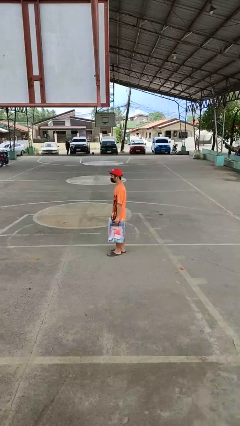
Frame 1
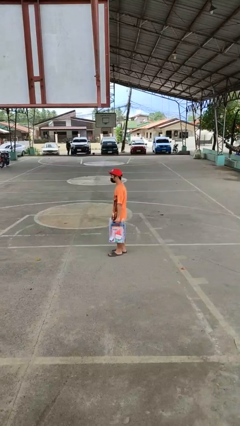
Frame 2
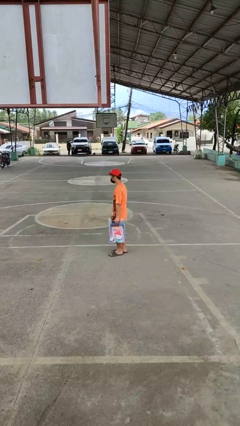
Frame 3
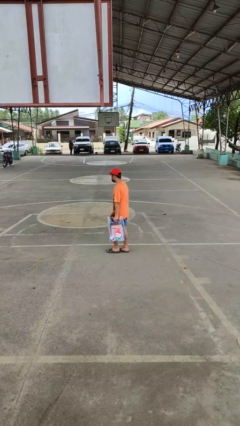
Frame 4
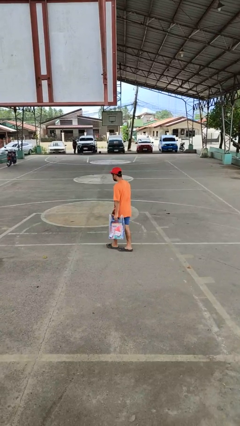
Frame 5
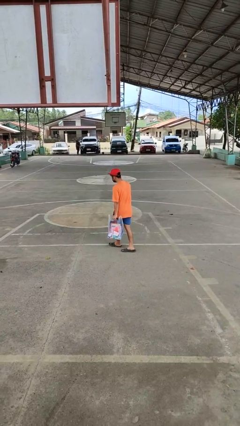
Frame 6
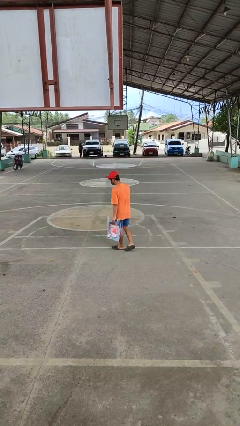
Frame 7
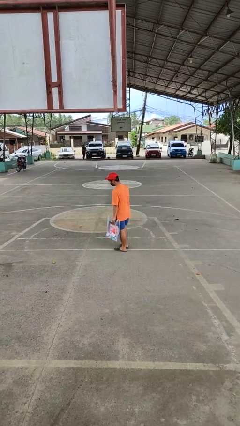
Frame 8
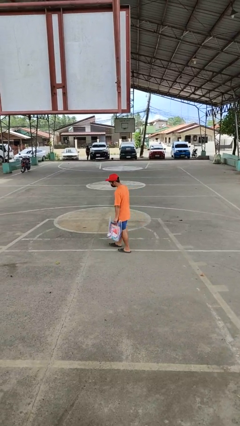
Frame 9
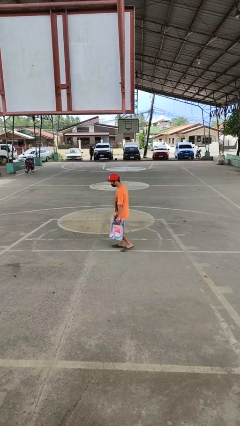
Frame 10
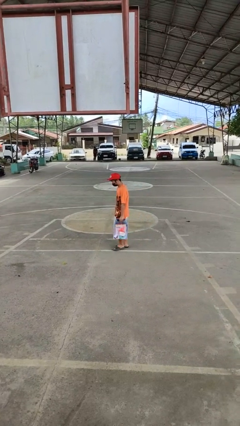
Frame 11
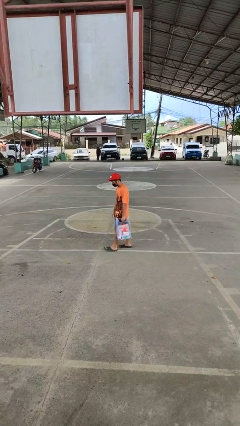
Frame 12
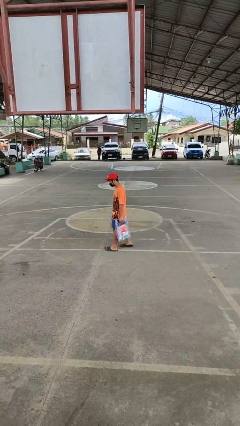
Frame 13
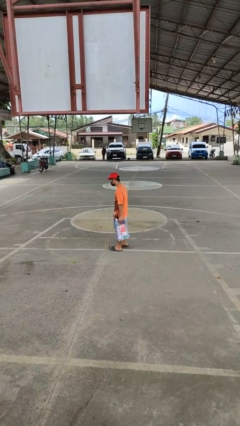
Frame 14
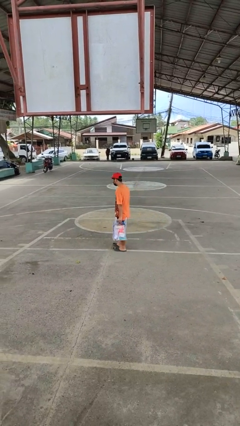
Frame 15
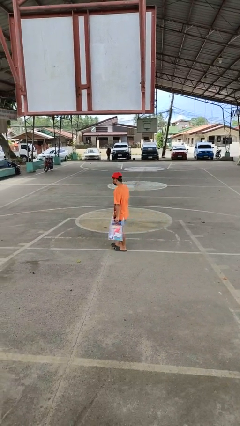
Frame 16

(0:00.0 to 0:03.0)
person carries groceries

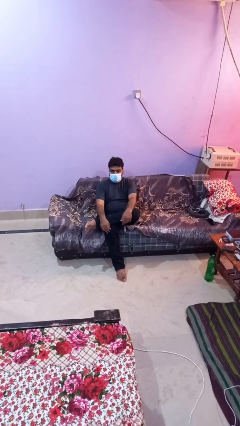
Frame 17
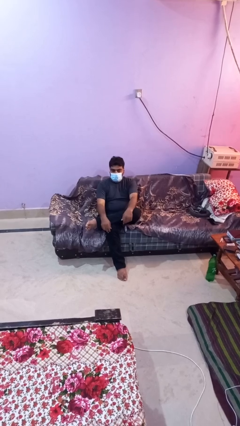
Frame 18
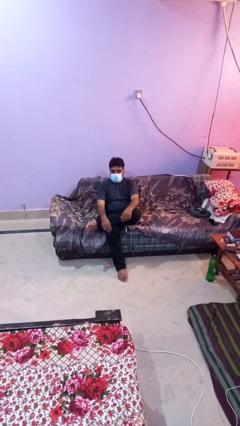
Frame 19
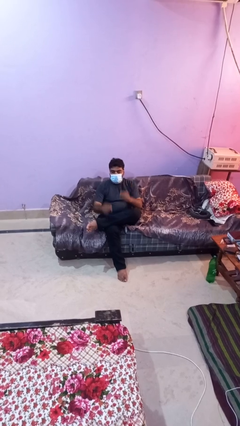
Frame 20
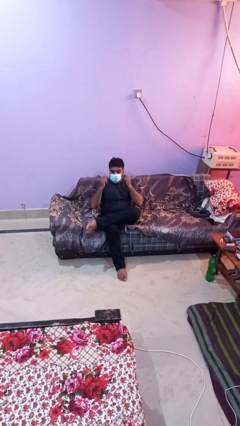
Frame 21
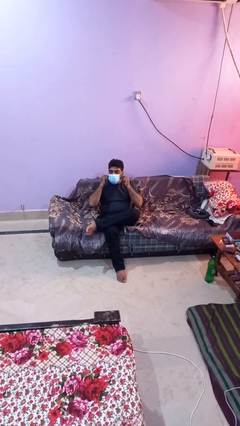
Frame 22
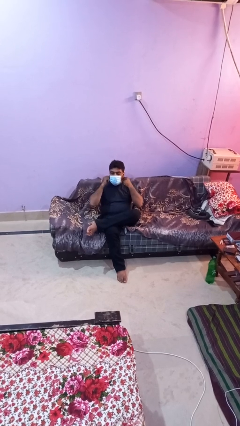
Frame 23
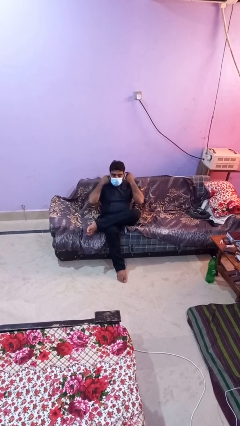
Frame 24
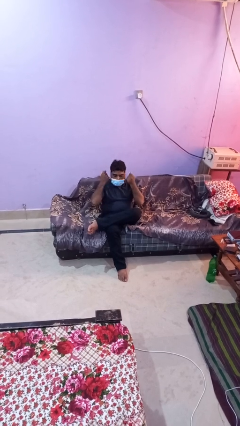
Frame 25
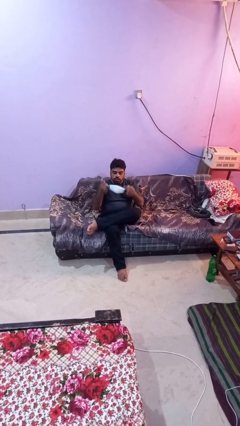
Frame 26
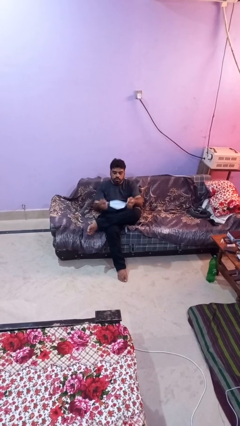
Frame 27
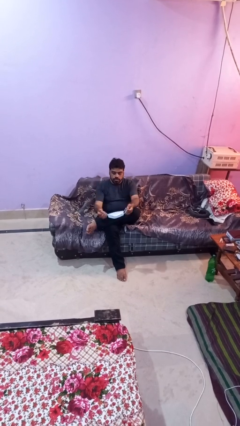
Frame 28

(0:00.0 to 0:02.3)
person takes off facemask

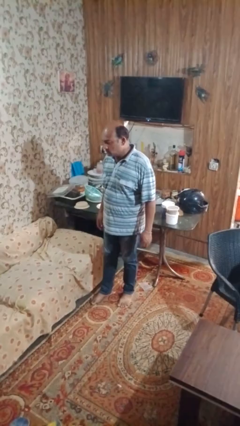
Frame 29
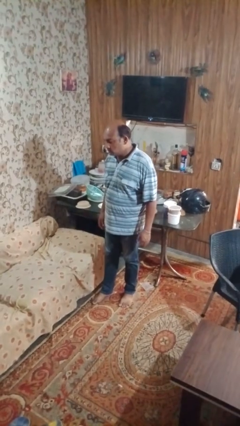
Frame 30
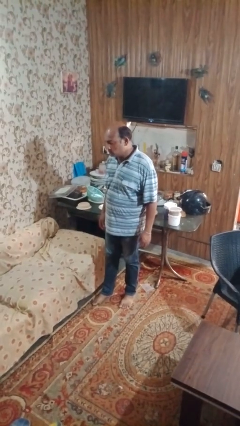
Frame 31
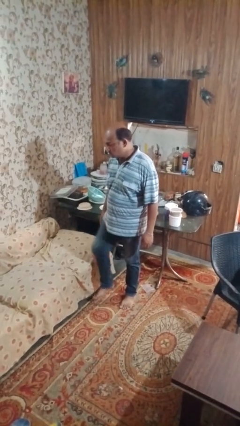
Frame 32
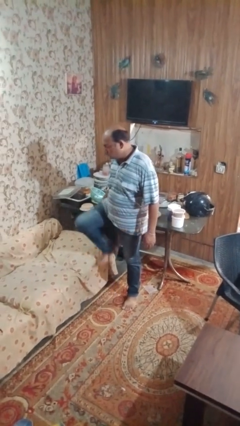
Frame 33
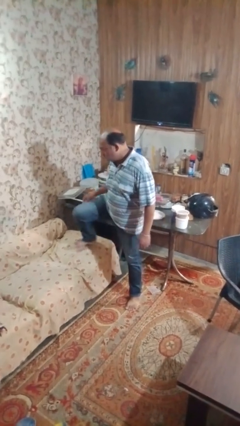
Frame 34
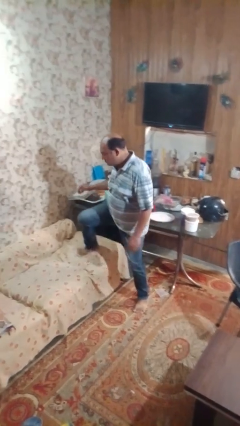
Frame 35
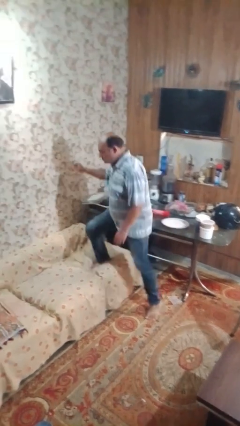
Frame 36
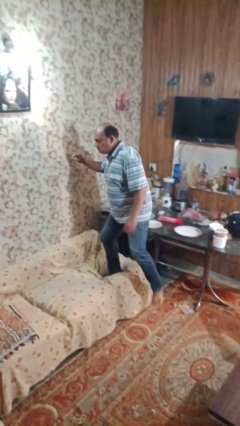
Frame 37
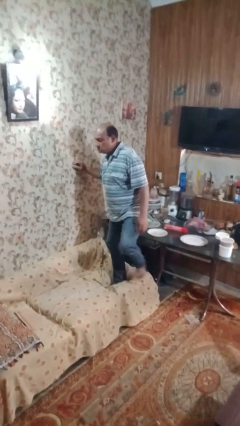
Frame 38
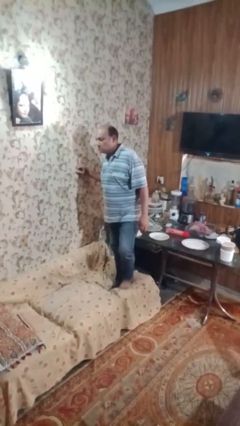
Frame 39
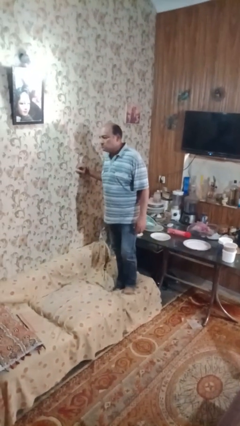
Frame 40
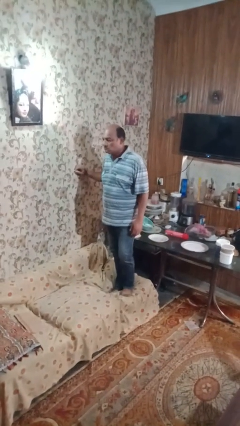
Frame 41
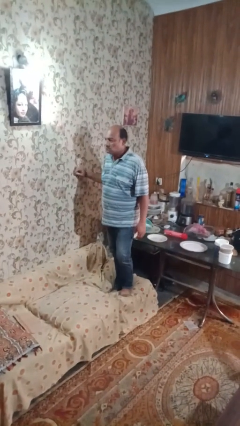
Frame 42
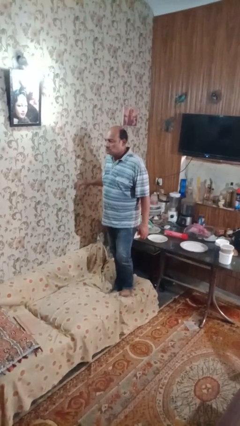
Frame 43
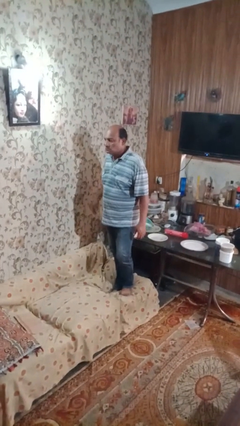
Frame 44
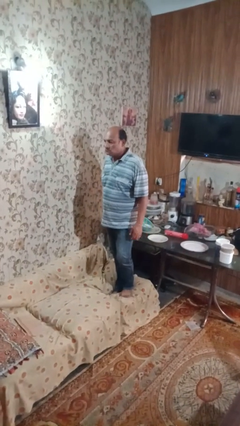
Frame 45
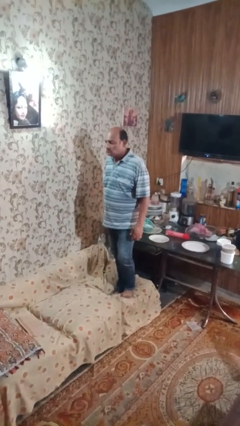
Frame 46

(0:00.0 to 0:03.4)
person climbs on couch

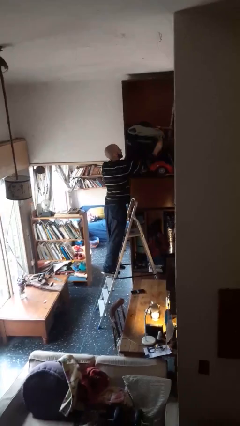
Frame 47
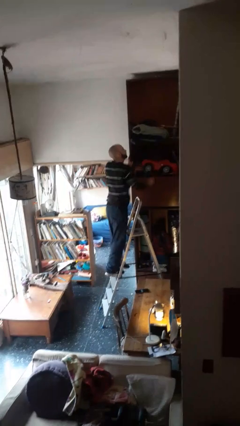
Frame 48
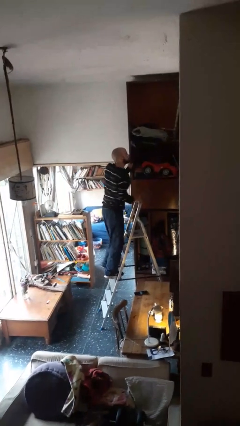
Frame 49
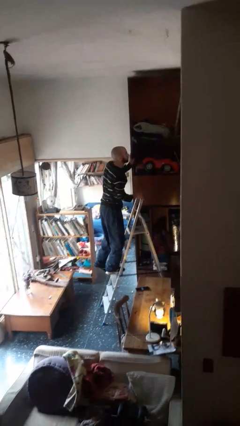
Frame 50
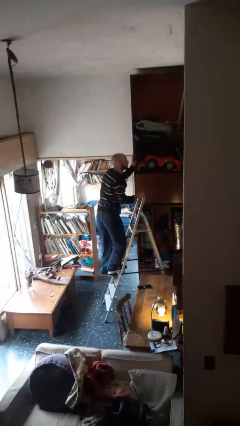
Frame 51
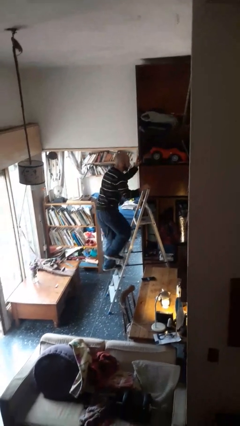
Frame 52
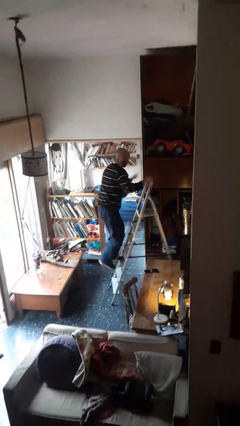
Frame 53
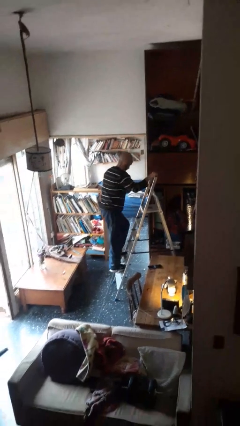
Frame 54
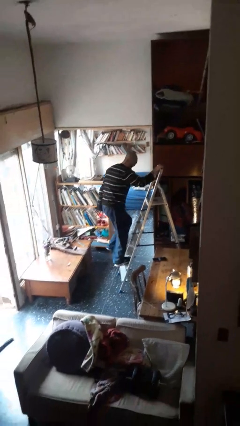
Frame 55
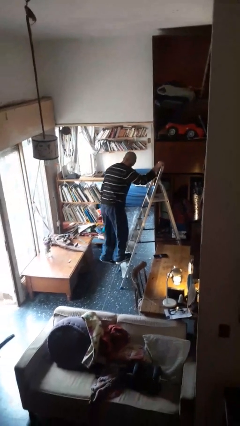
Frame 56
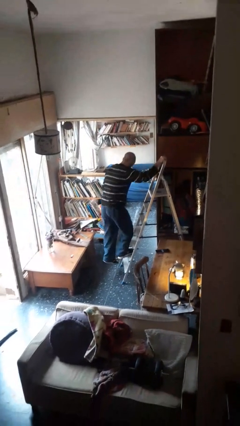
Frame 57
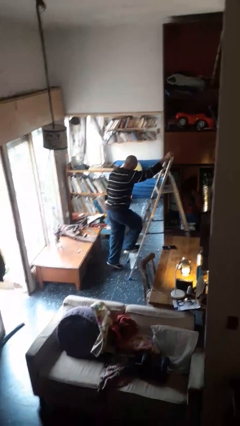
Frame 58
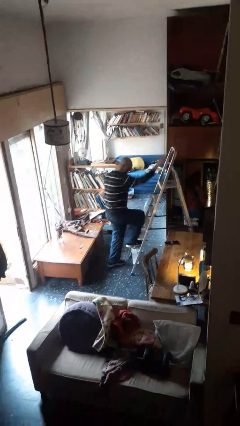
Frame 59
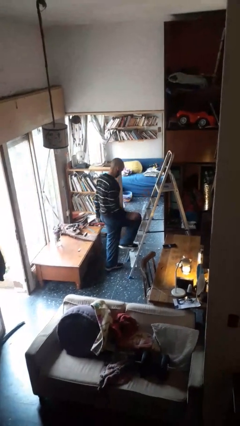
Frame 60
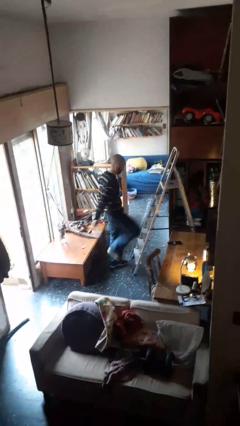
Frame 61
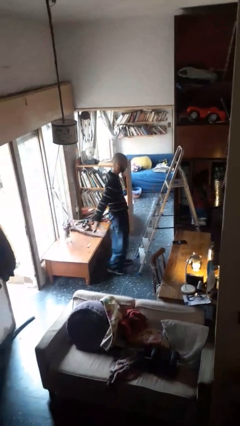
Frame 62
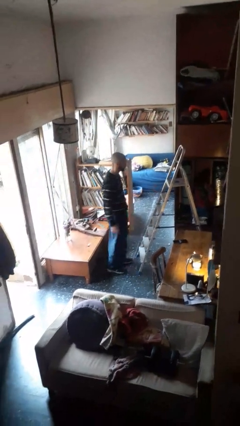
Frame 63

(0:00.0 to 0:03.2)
person climbs down ladder

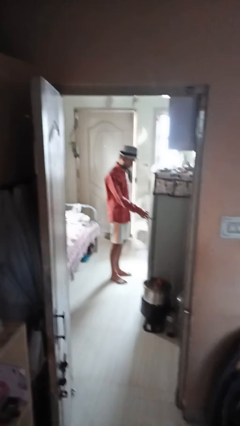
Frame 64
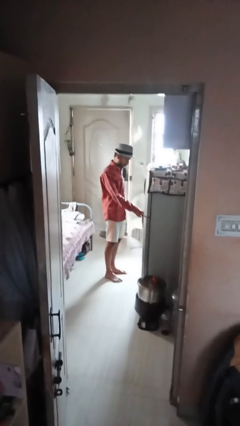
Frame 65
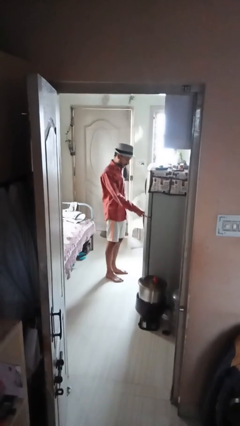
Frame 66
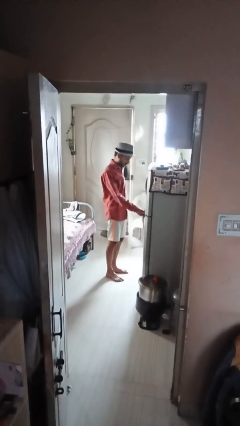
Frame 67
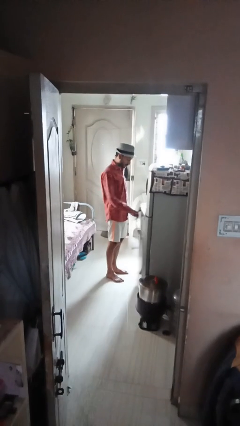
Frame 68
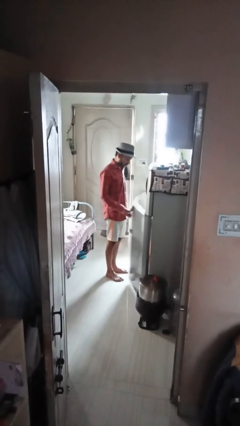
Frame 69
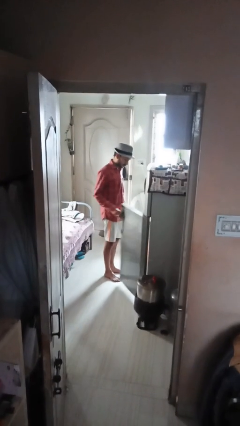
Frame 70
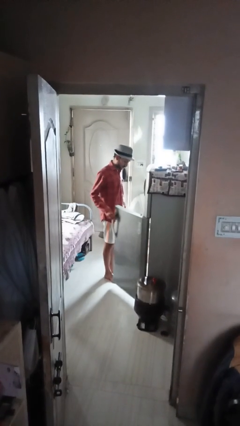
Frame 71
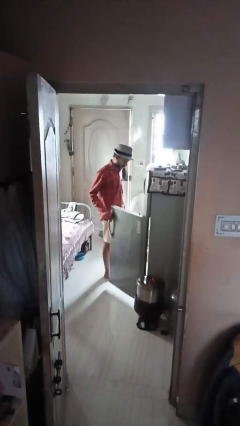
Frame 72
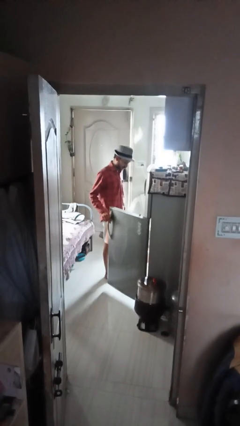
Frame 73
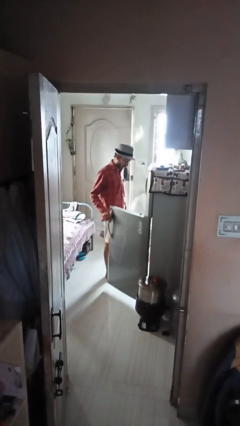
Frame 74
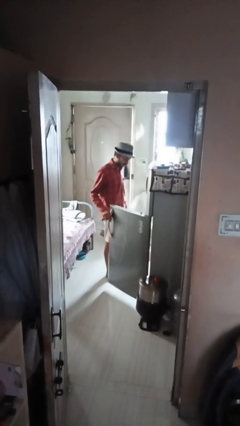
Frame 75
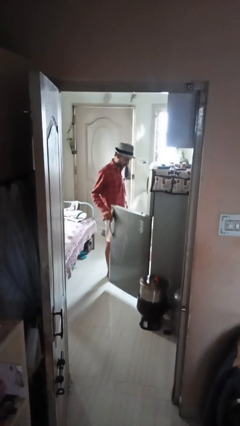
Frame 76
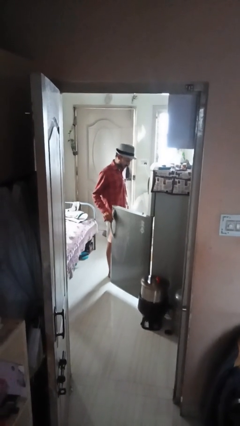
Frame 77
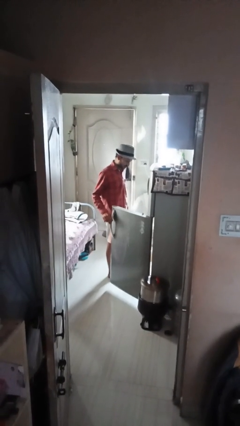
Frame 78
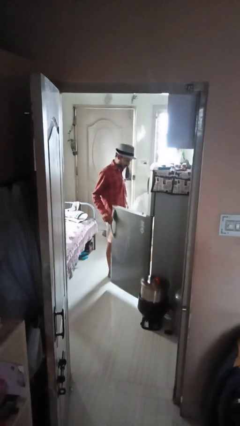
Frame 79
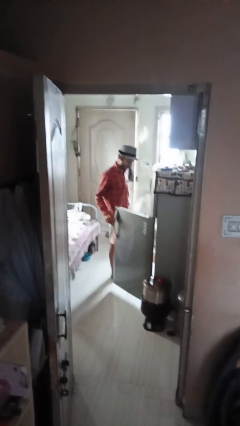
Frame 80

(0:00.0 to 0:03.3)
person opens refrigerator

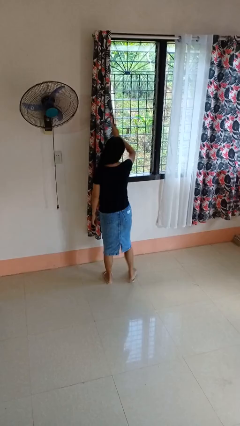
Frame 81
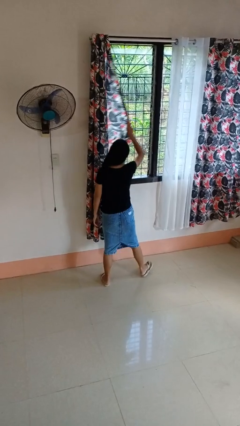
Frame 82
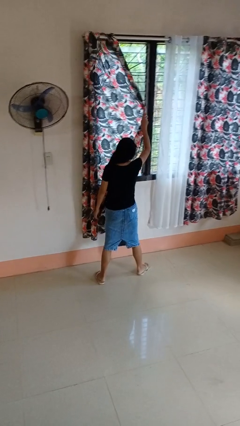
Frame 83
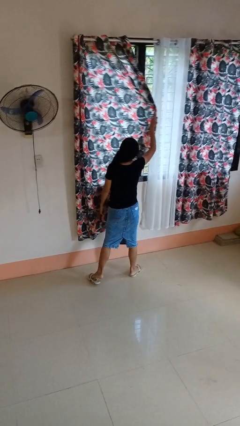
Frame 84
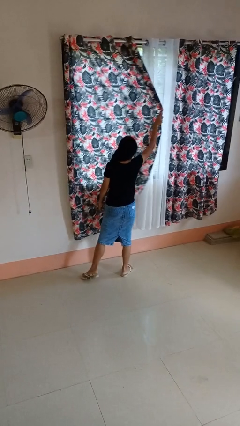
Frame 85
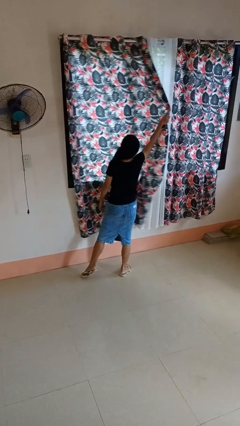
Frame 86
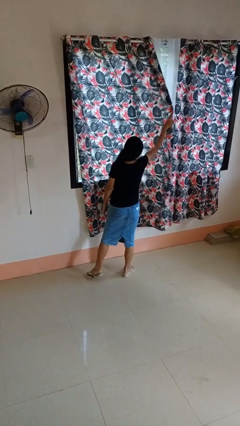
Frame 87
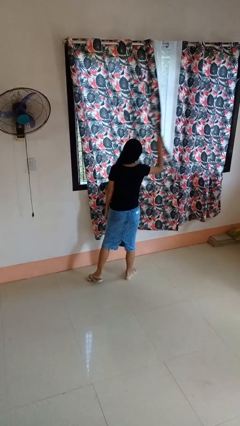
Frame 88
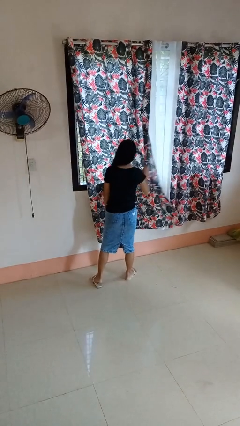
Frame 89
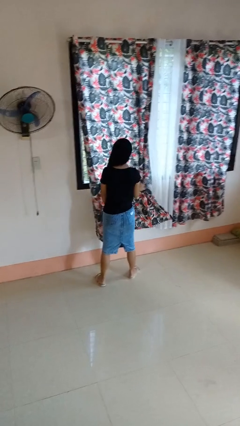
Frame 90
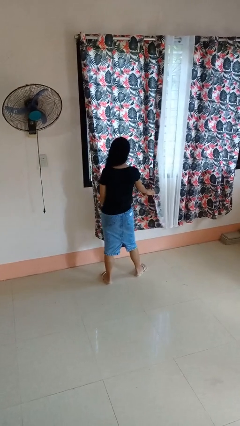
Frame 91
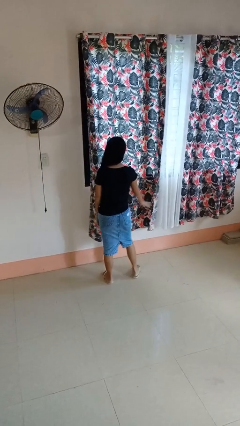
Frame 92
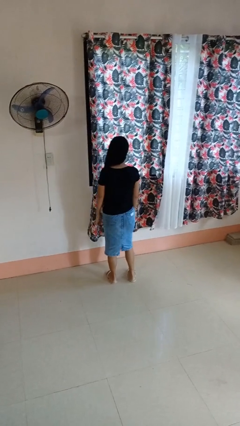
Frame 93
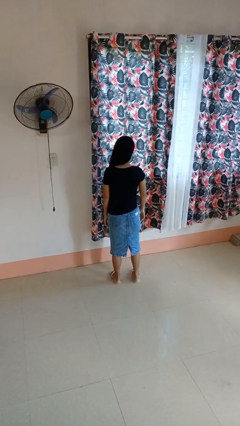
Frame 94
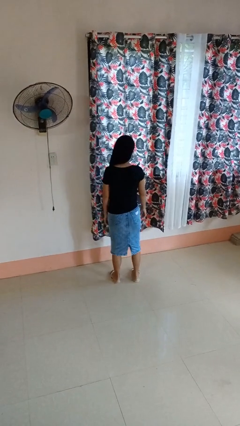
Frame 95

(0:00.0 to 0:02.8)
person closes curtains
